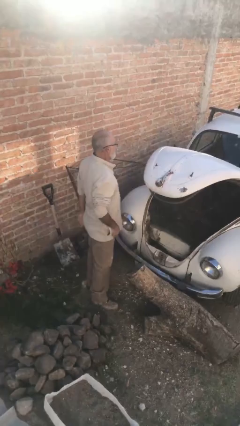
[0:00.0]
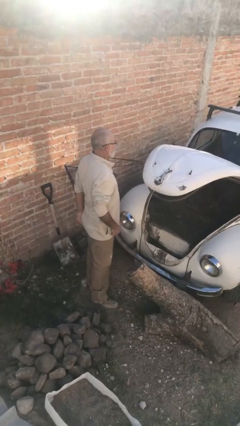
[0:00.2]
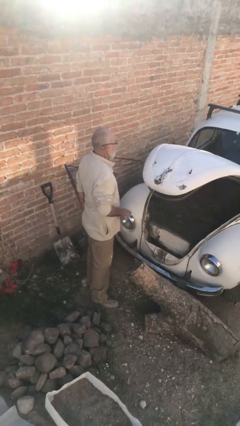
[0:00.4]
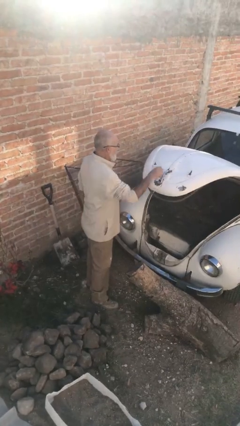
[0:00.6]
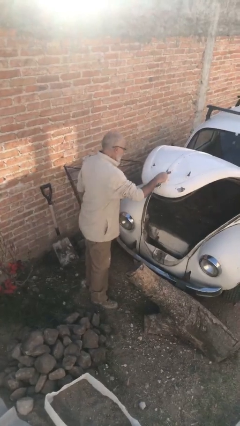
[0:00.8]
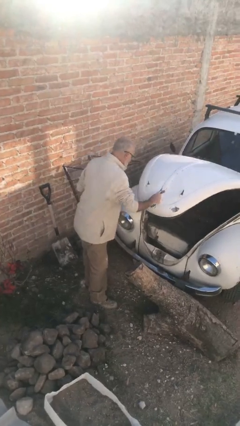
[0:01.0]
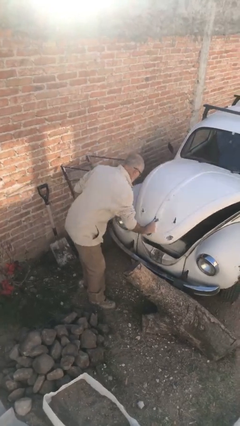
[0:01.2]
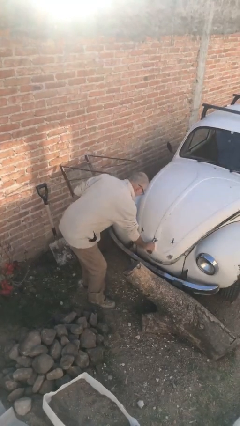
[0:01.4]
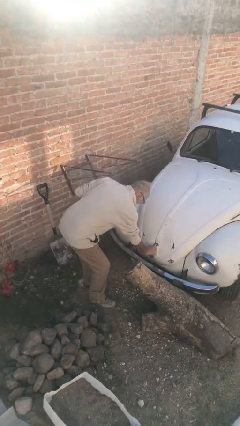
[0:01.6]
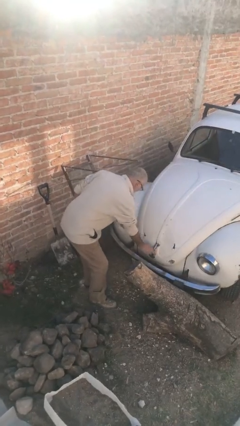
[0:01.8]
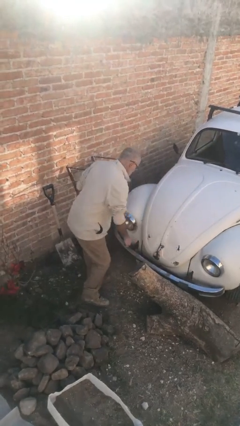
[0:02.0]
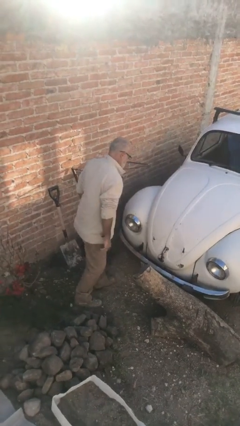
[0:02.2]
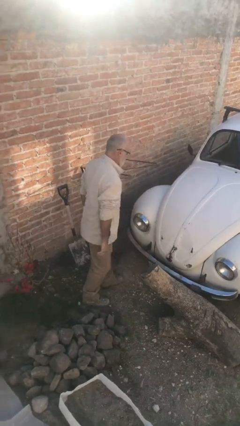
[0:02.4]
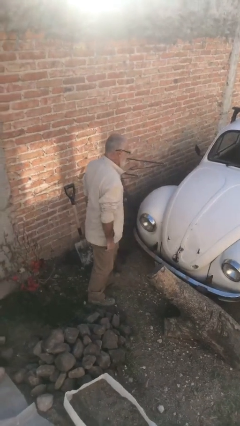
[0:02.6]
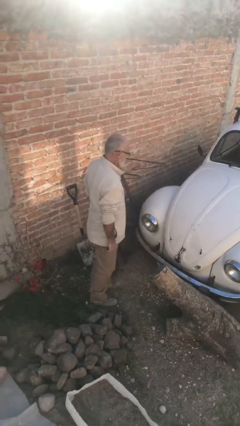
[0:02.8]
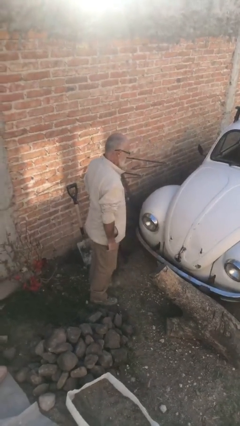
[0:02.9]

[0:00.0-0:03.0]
person closes car trunk

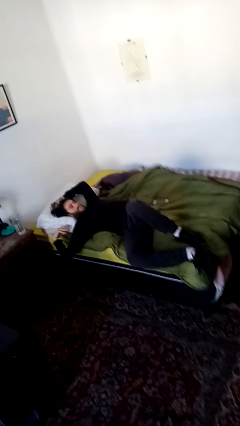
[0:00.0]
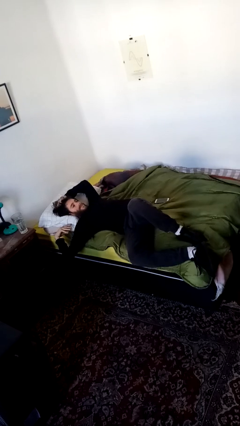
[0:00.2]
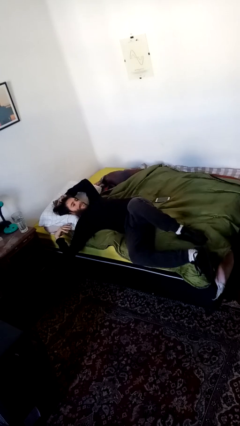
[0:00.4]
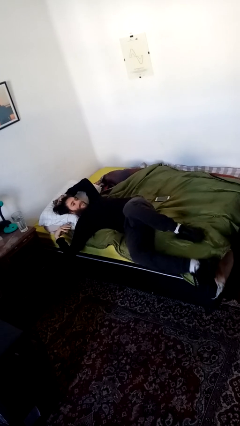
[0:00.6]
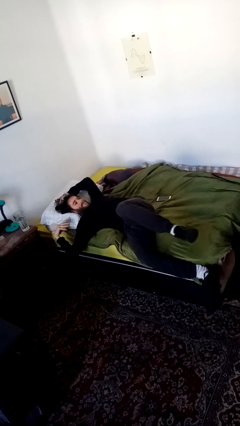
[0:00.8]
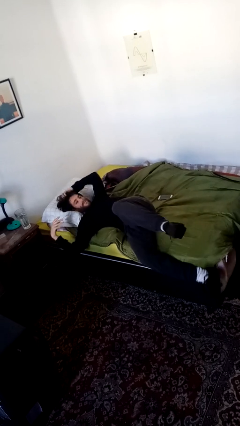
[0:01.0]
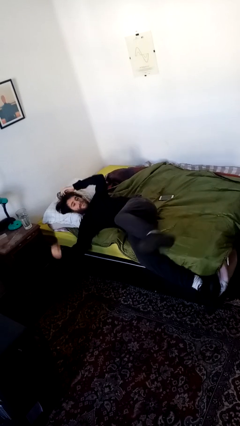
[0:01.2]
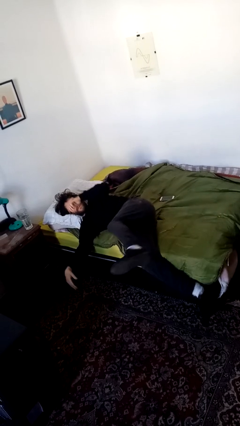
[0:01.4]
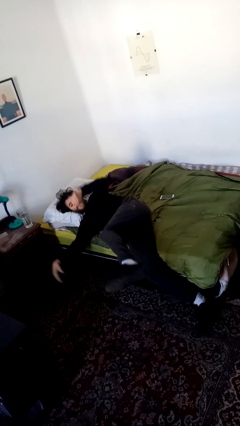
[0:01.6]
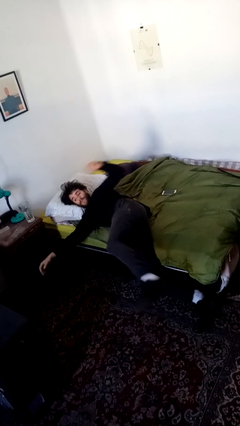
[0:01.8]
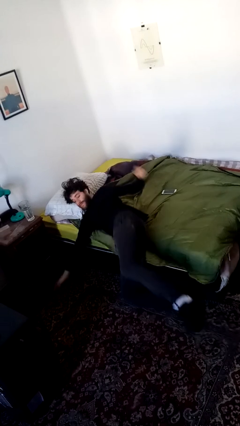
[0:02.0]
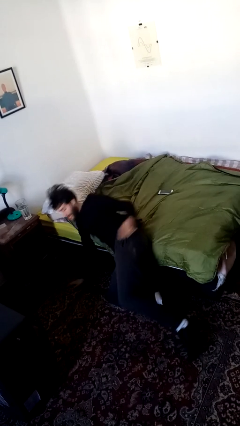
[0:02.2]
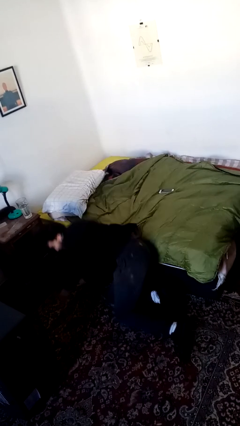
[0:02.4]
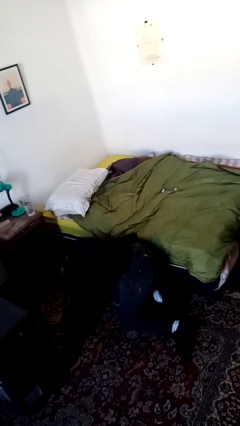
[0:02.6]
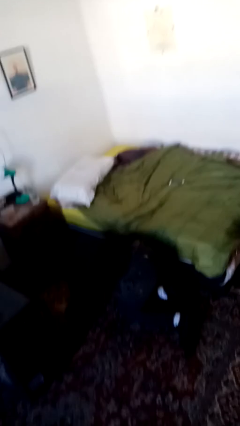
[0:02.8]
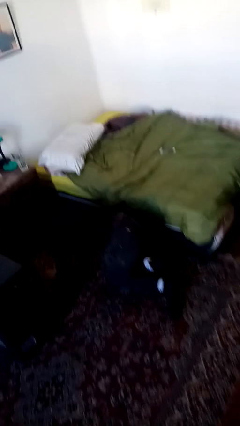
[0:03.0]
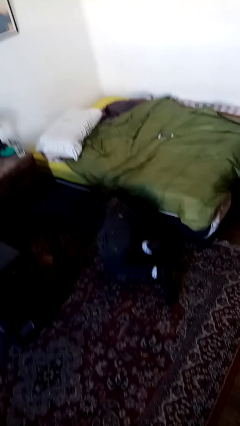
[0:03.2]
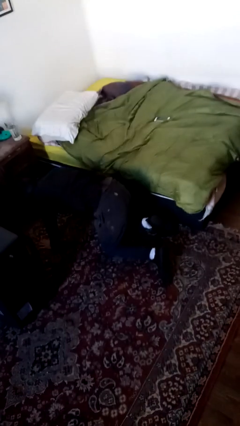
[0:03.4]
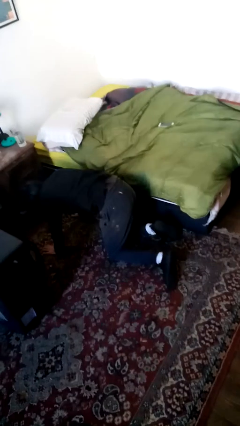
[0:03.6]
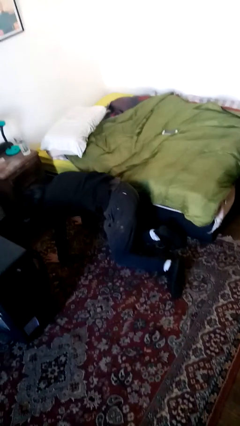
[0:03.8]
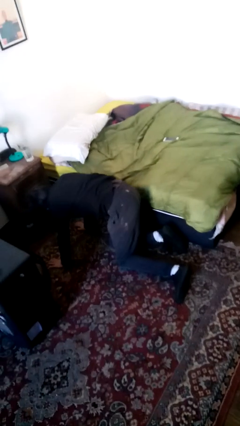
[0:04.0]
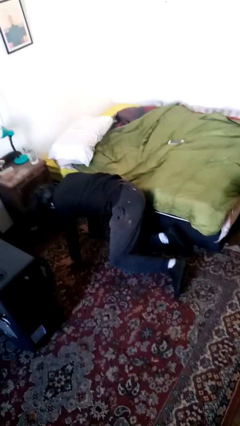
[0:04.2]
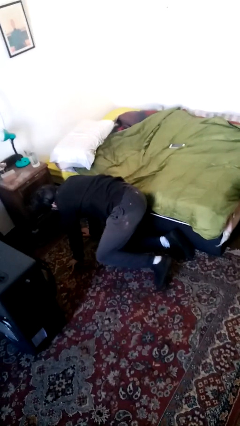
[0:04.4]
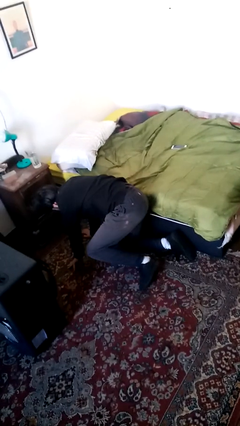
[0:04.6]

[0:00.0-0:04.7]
person falls from chair

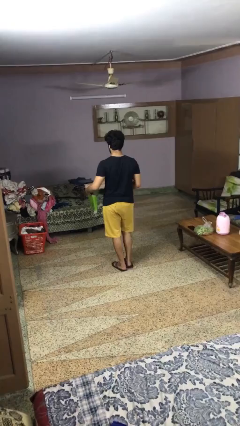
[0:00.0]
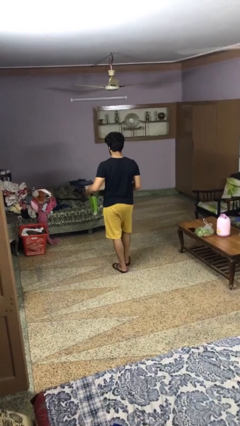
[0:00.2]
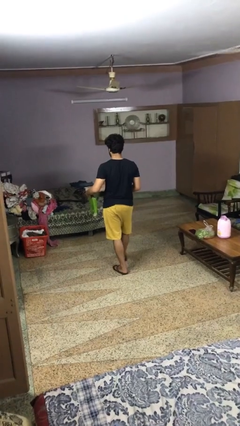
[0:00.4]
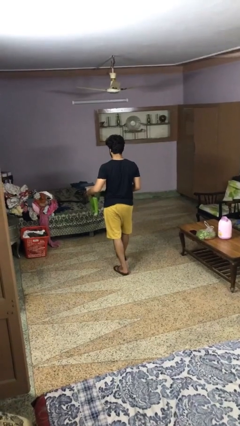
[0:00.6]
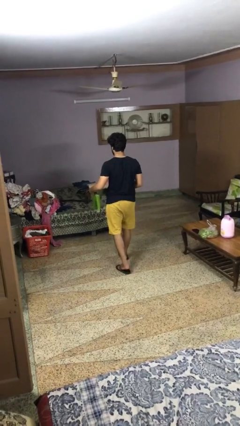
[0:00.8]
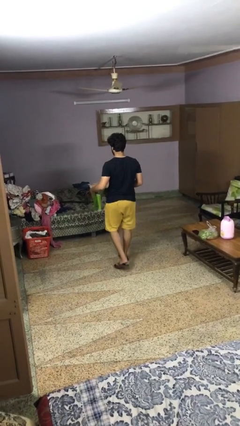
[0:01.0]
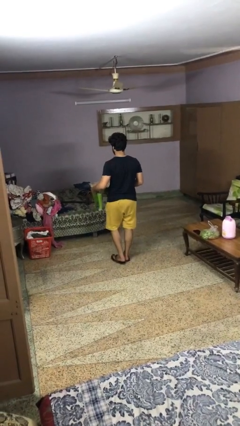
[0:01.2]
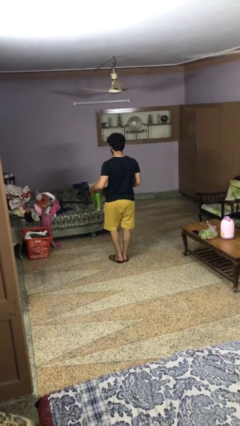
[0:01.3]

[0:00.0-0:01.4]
person carries furniture

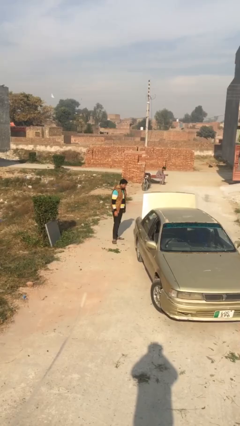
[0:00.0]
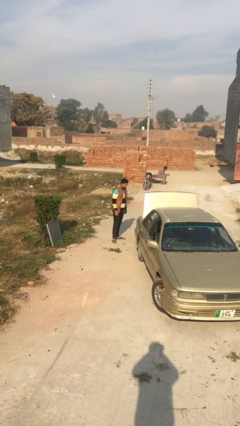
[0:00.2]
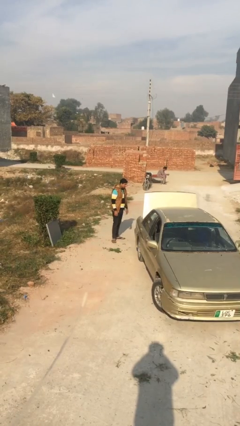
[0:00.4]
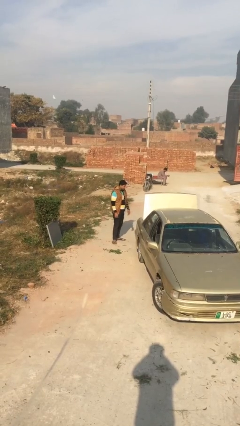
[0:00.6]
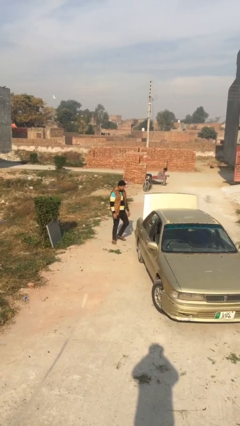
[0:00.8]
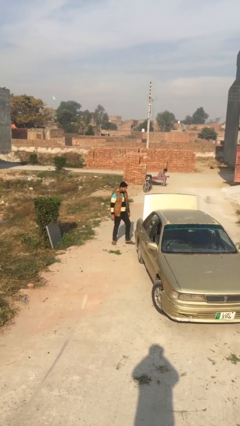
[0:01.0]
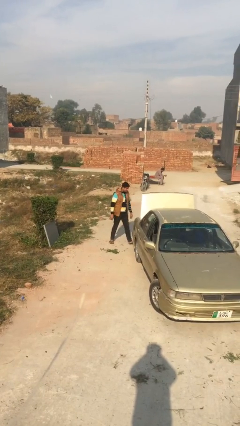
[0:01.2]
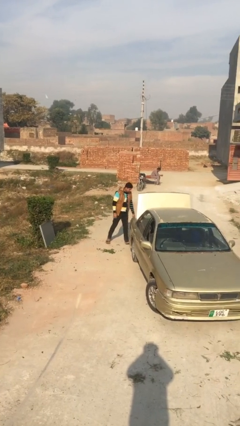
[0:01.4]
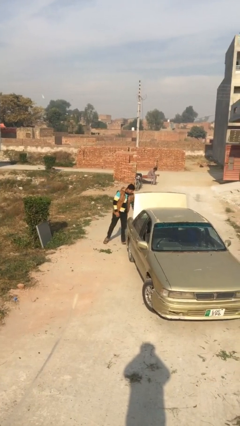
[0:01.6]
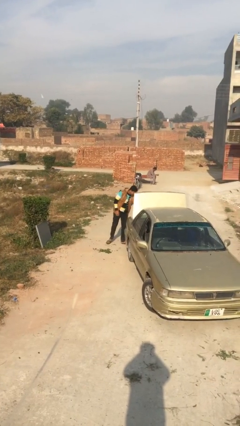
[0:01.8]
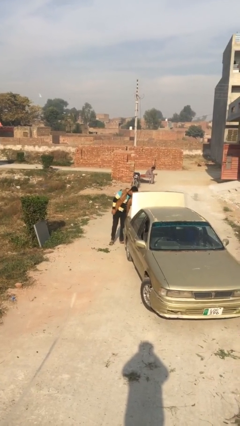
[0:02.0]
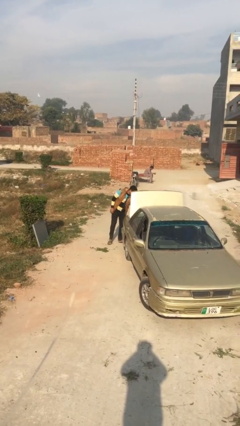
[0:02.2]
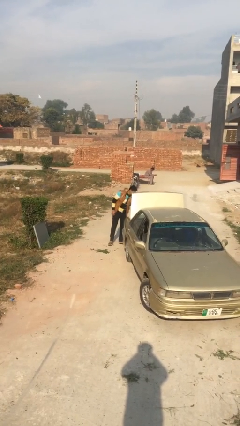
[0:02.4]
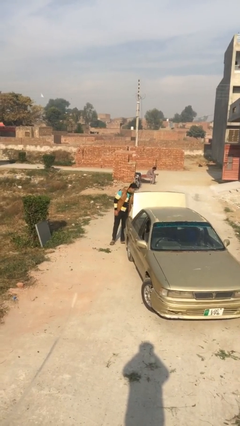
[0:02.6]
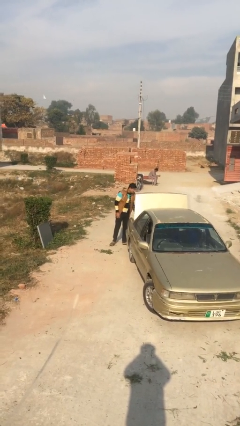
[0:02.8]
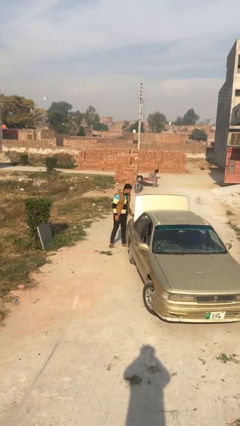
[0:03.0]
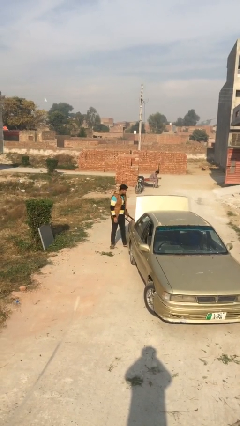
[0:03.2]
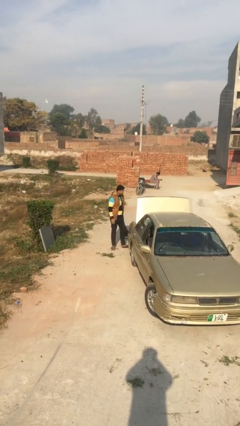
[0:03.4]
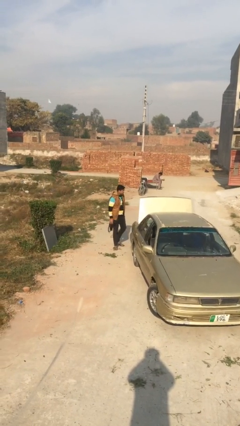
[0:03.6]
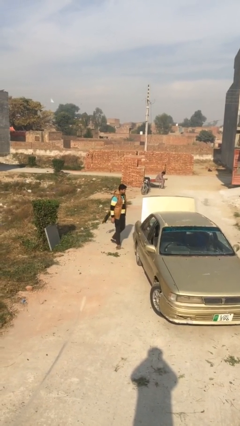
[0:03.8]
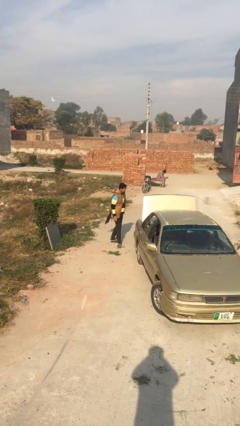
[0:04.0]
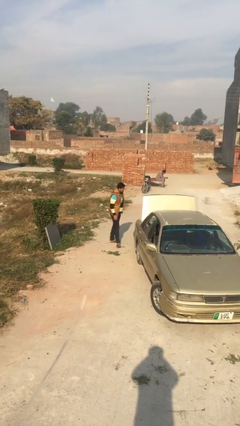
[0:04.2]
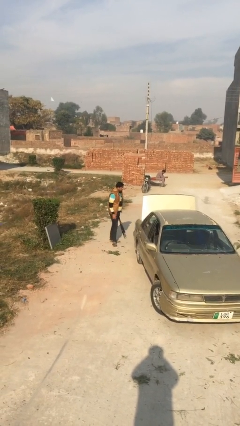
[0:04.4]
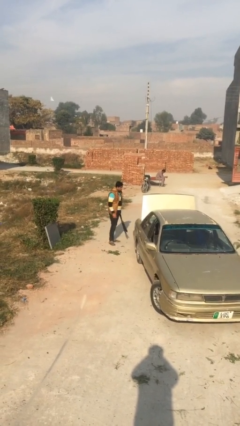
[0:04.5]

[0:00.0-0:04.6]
person unloads car

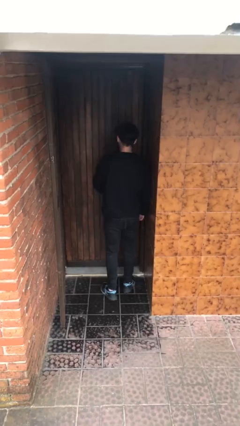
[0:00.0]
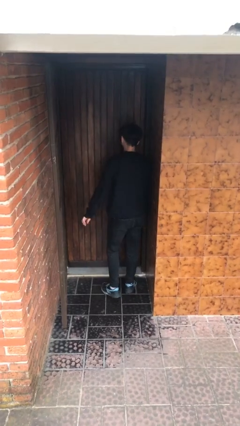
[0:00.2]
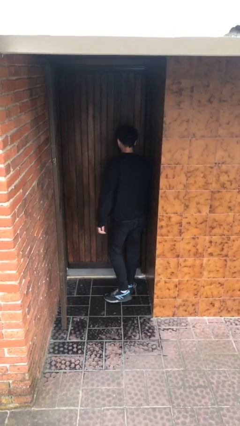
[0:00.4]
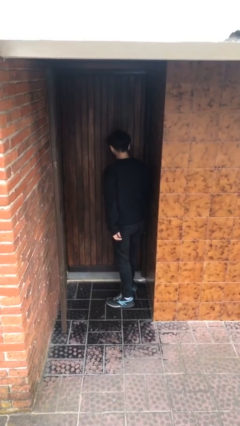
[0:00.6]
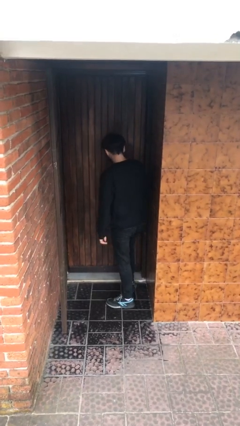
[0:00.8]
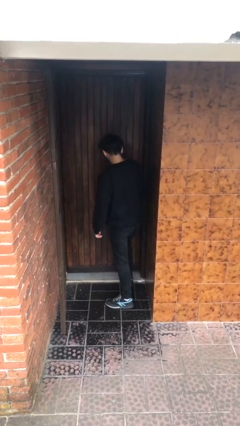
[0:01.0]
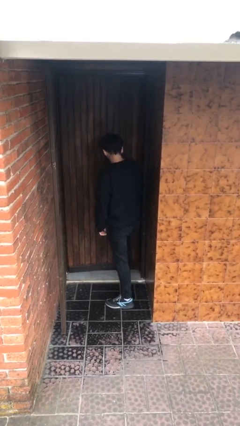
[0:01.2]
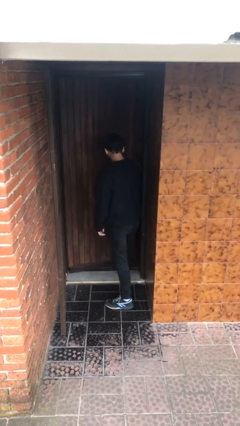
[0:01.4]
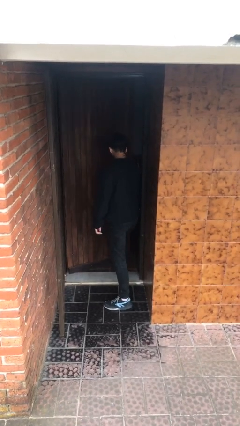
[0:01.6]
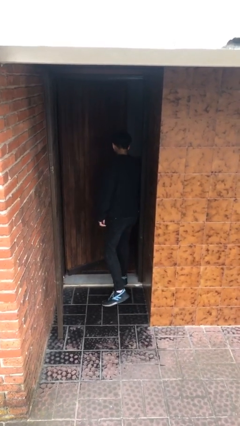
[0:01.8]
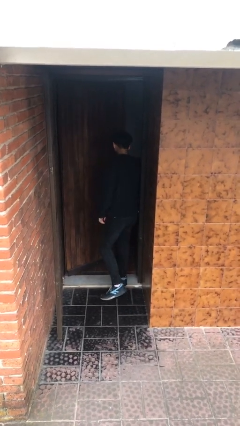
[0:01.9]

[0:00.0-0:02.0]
person opens facility door

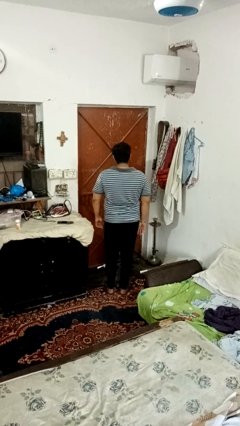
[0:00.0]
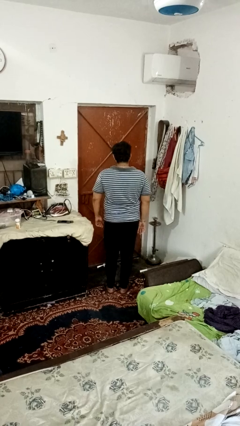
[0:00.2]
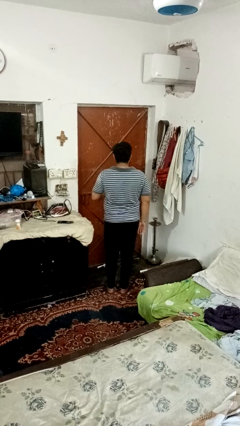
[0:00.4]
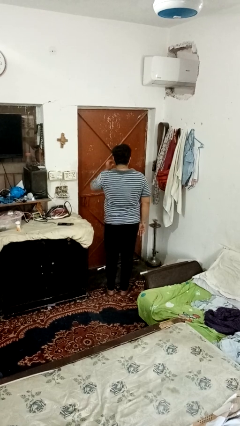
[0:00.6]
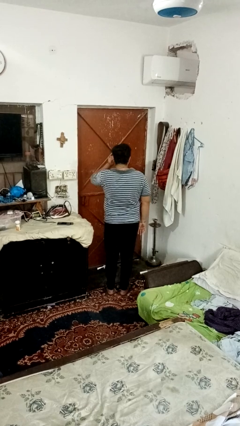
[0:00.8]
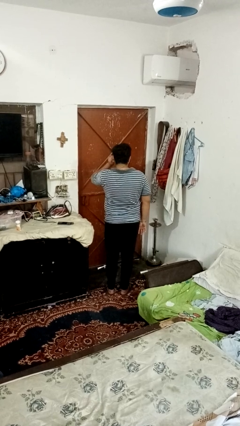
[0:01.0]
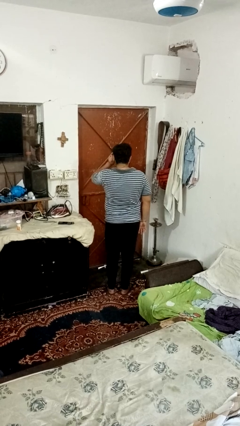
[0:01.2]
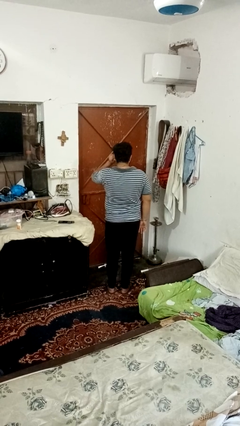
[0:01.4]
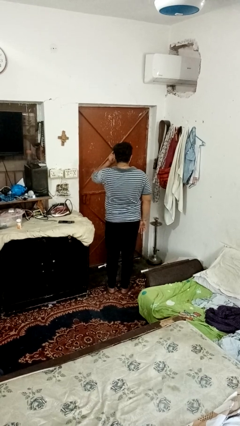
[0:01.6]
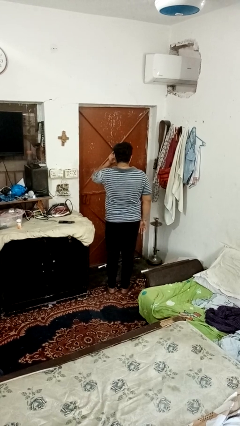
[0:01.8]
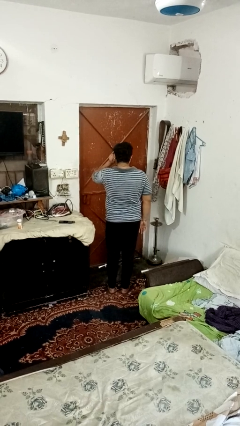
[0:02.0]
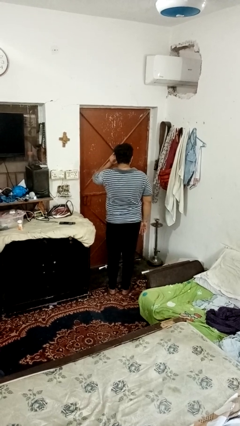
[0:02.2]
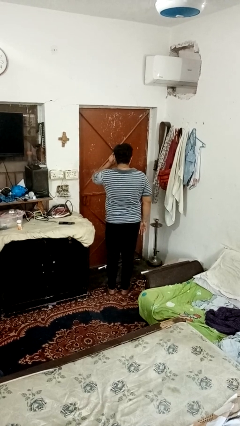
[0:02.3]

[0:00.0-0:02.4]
person touches earlobe
